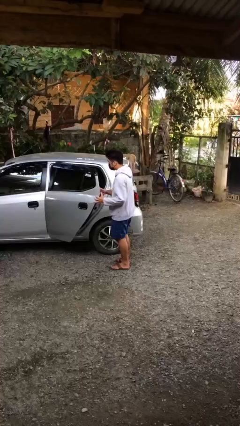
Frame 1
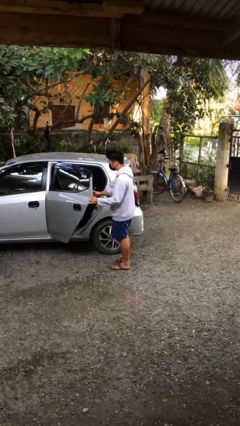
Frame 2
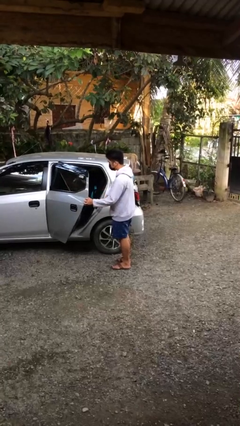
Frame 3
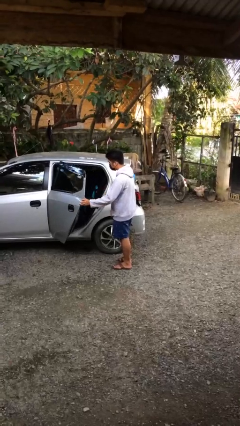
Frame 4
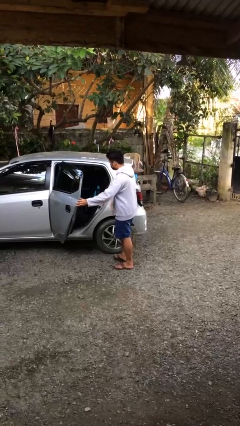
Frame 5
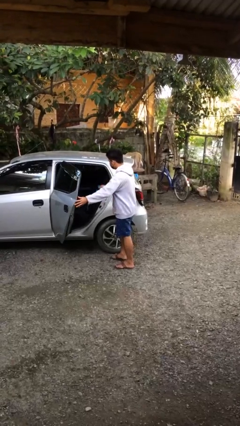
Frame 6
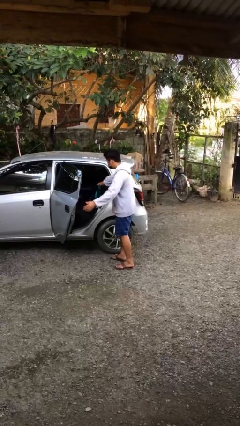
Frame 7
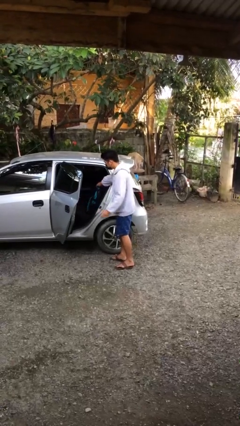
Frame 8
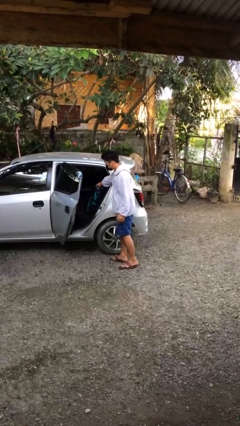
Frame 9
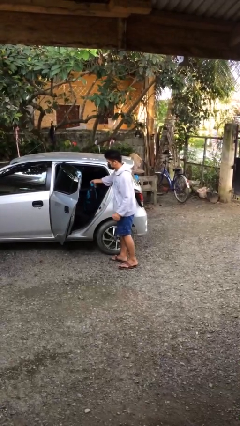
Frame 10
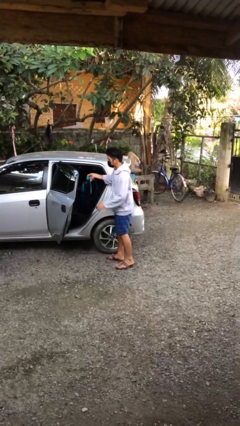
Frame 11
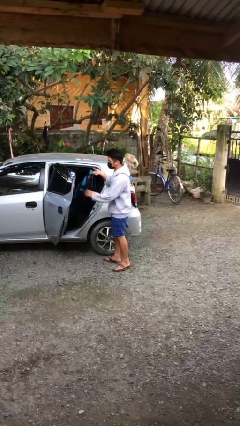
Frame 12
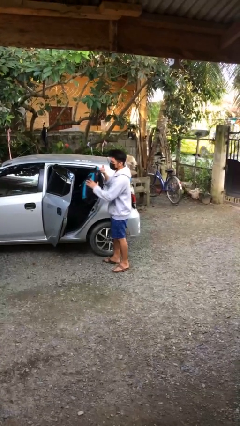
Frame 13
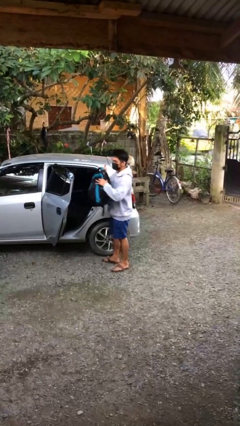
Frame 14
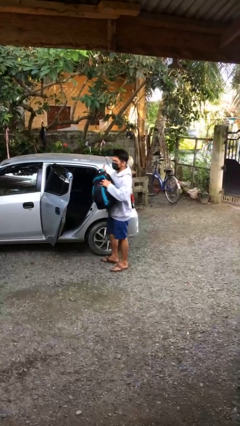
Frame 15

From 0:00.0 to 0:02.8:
person unloads car

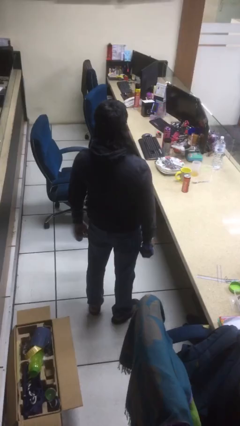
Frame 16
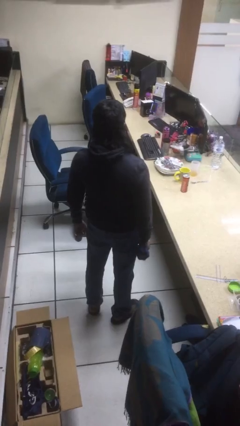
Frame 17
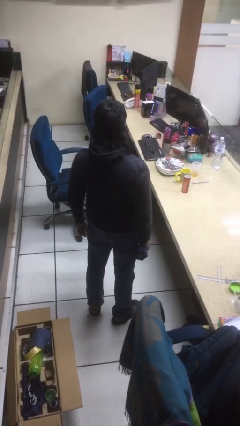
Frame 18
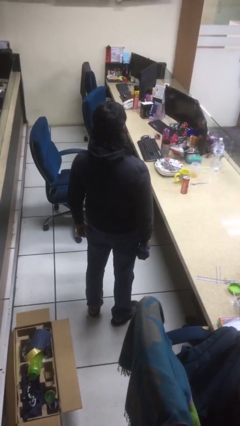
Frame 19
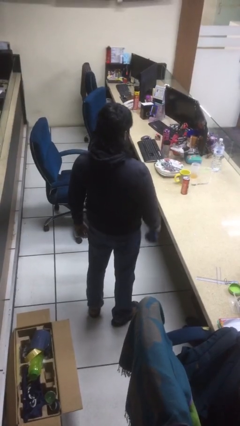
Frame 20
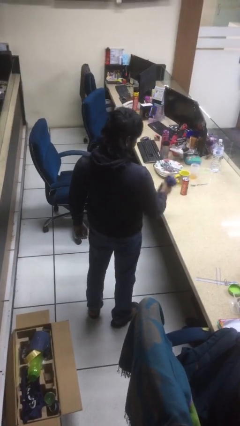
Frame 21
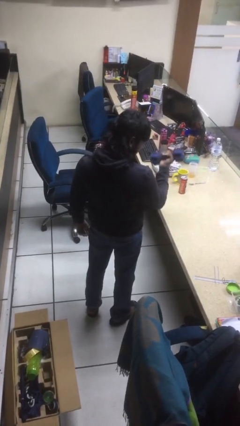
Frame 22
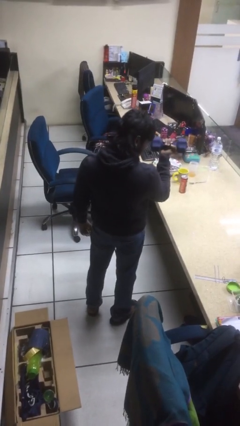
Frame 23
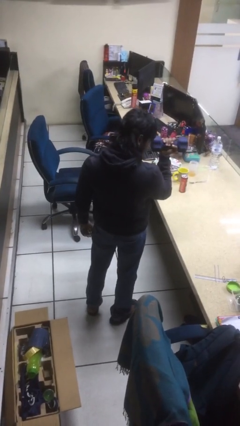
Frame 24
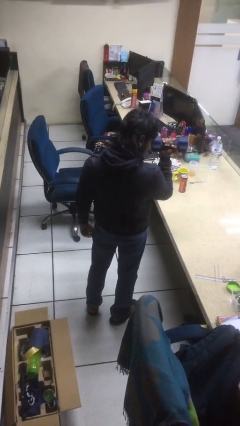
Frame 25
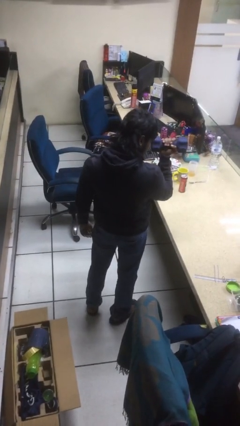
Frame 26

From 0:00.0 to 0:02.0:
person lifts dumbbells

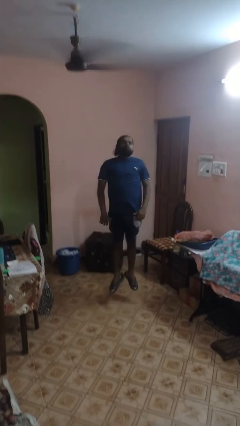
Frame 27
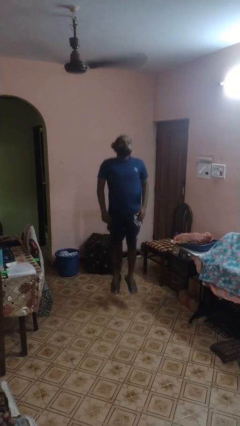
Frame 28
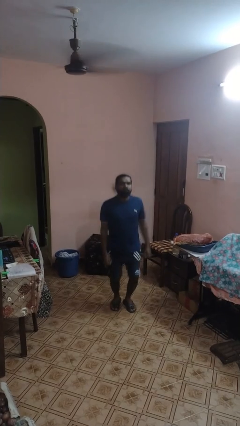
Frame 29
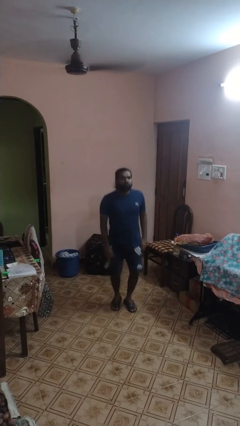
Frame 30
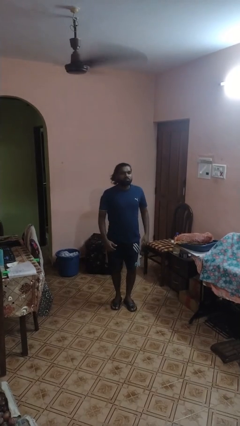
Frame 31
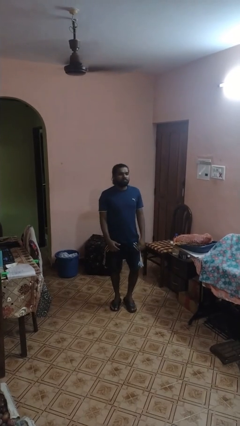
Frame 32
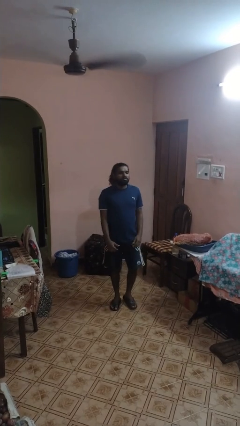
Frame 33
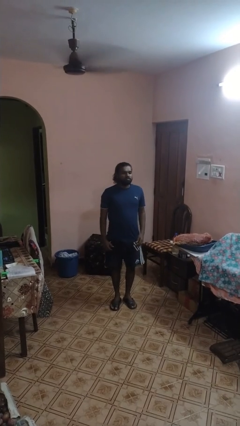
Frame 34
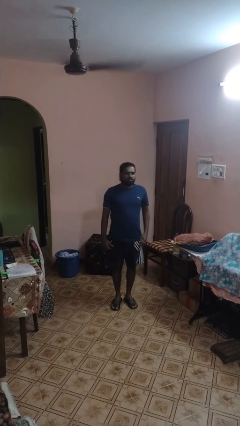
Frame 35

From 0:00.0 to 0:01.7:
person jumps

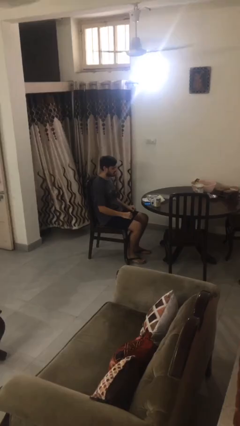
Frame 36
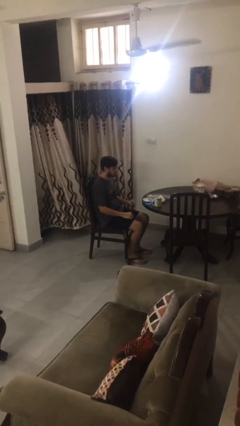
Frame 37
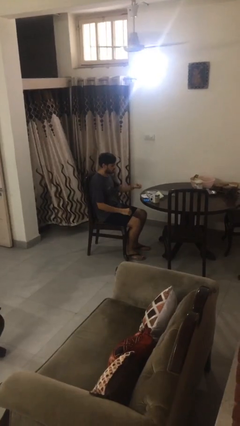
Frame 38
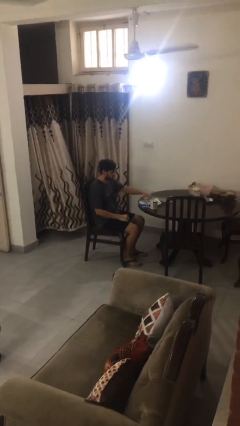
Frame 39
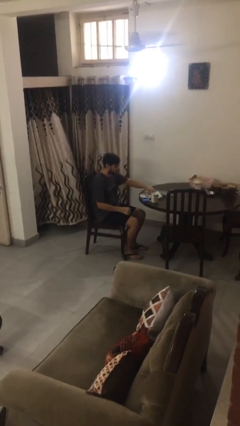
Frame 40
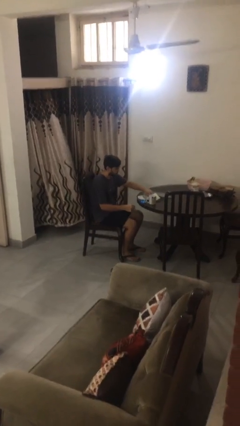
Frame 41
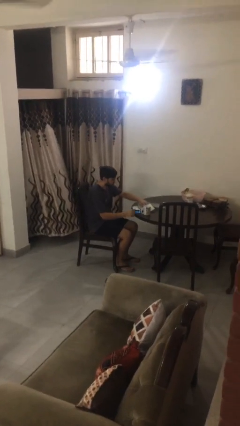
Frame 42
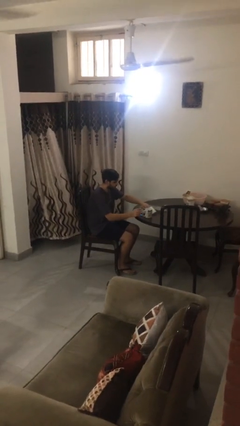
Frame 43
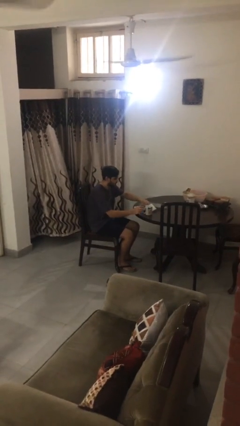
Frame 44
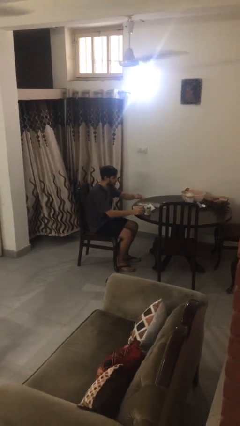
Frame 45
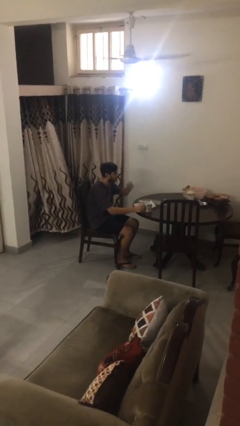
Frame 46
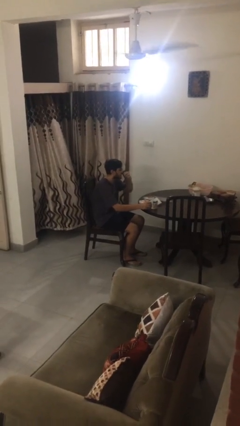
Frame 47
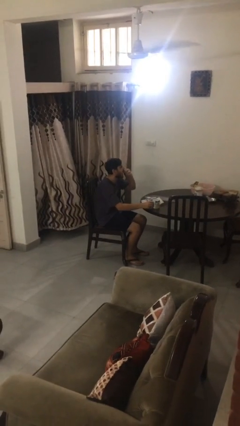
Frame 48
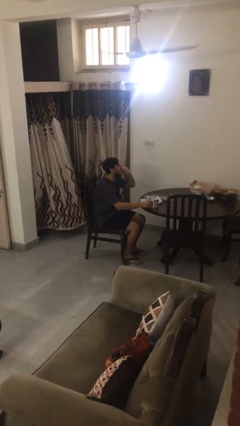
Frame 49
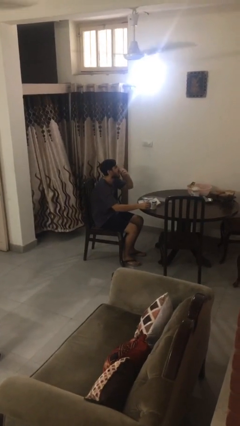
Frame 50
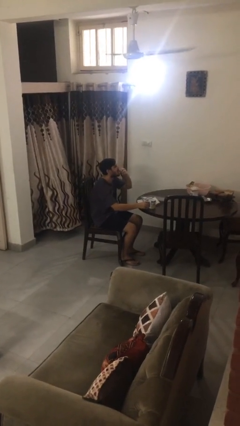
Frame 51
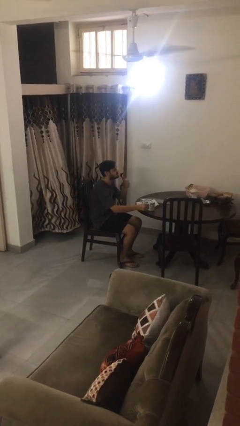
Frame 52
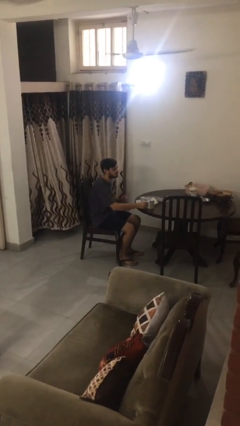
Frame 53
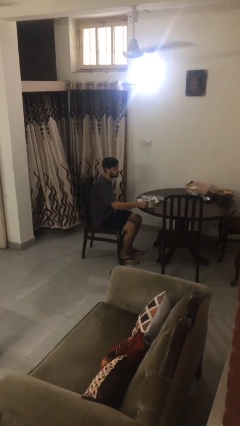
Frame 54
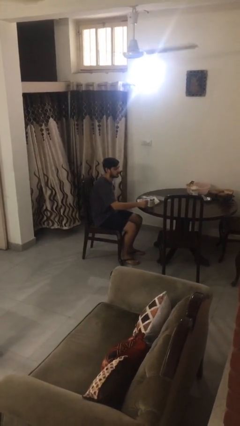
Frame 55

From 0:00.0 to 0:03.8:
person takes medicine pills

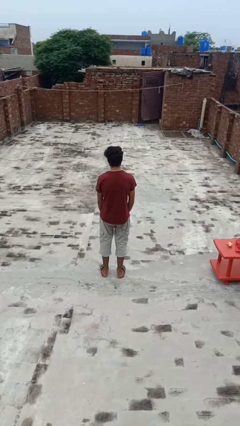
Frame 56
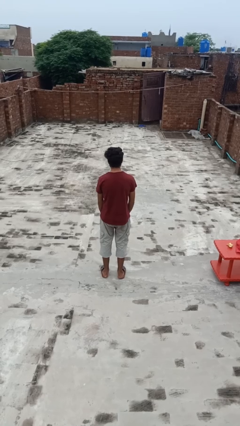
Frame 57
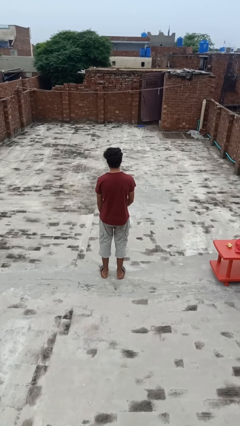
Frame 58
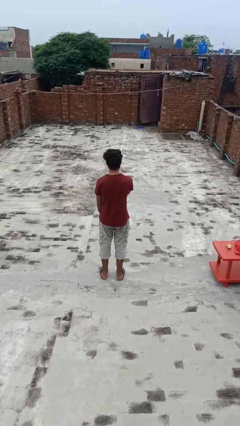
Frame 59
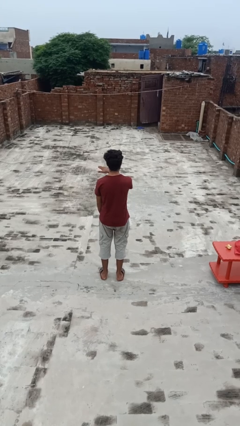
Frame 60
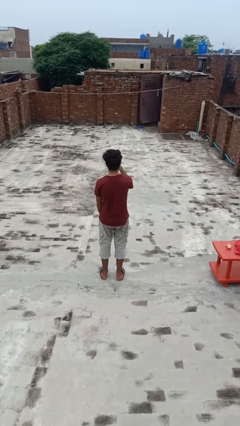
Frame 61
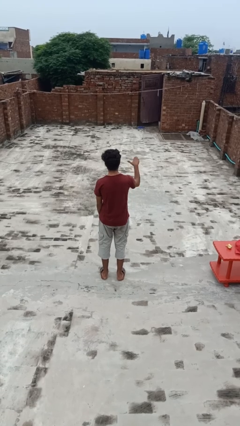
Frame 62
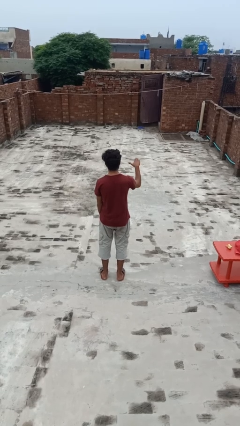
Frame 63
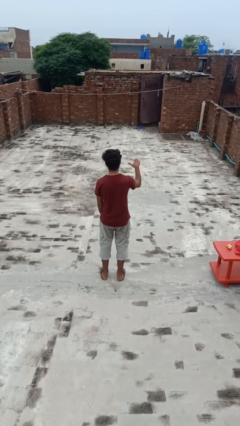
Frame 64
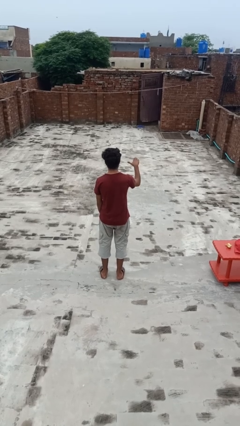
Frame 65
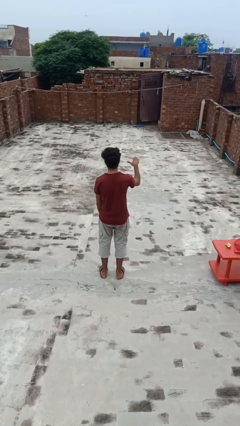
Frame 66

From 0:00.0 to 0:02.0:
person gestures cut

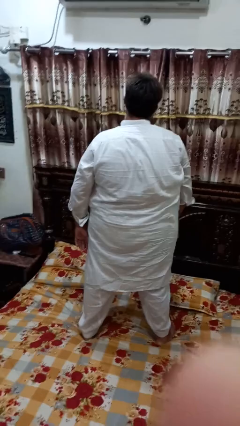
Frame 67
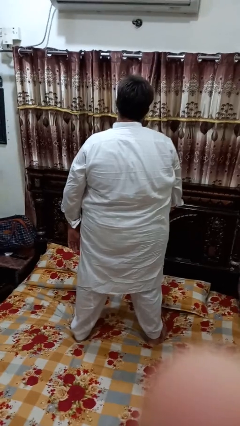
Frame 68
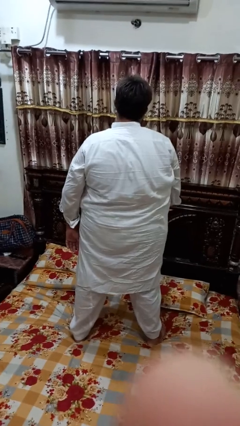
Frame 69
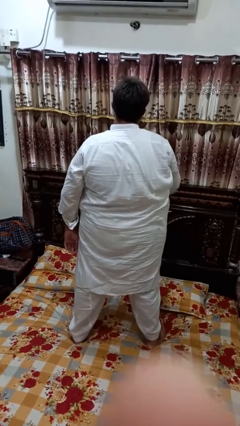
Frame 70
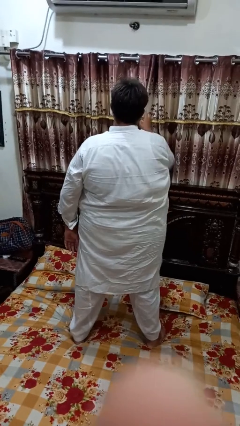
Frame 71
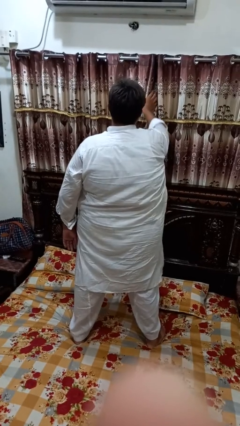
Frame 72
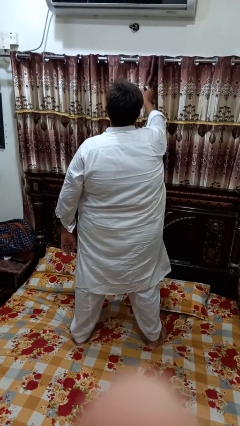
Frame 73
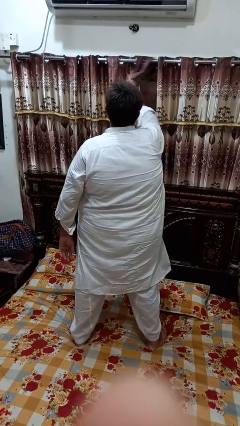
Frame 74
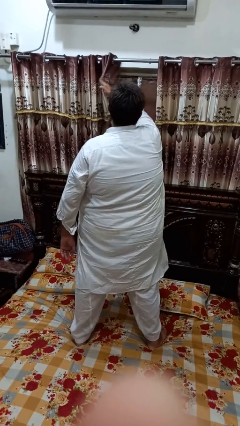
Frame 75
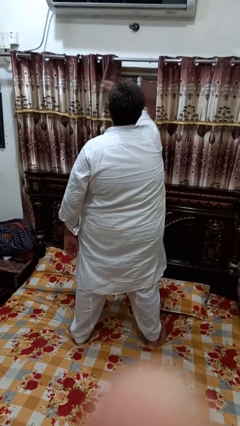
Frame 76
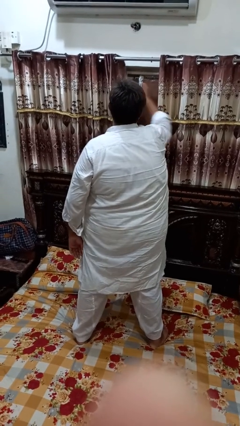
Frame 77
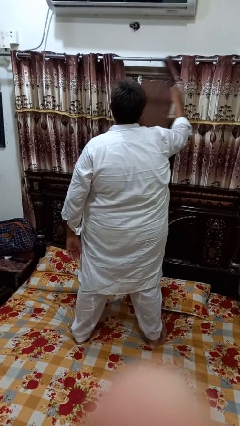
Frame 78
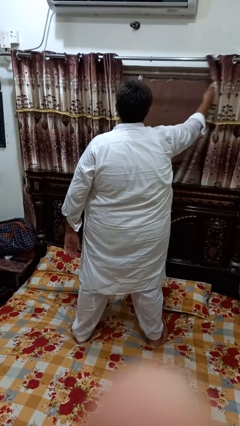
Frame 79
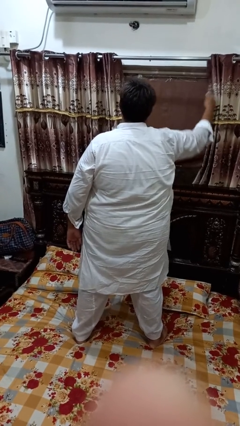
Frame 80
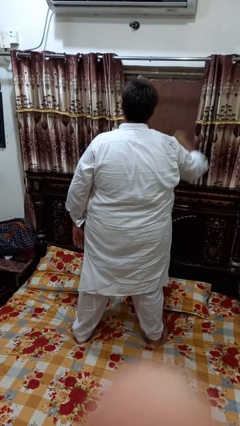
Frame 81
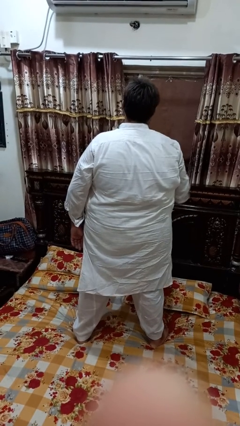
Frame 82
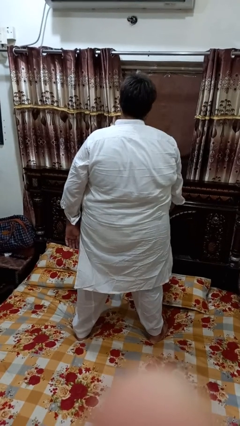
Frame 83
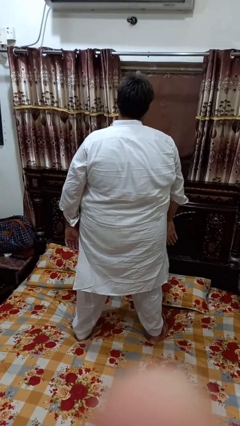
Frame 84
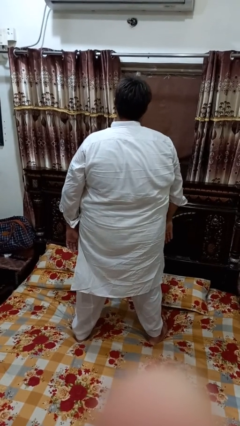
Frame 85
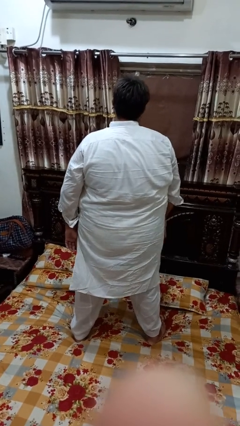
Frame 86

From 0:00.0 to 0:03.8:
person opens curtains

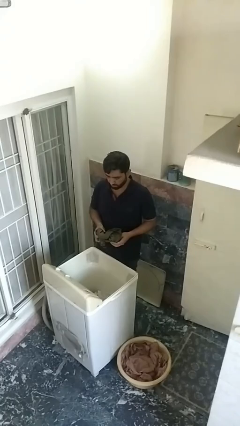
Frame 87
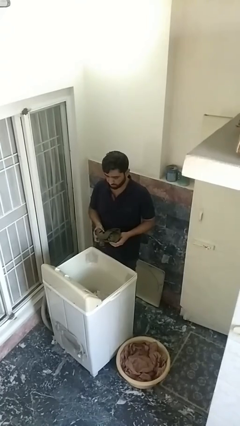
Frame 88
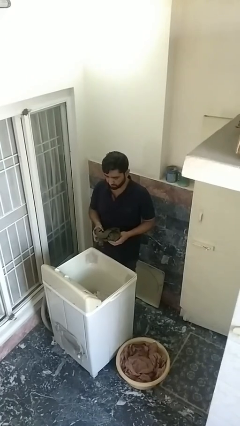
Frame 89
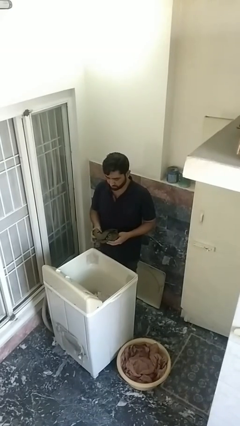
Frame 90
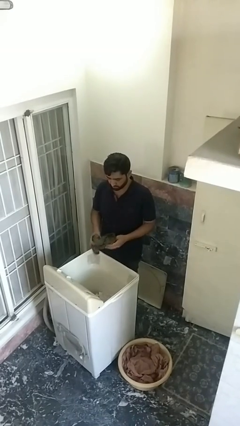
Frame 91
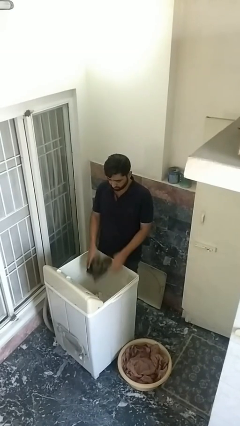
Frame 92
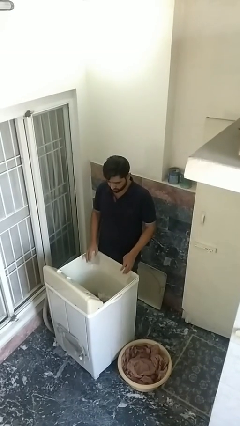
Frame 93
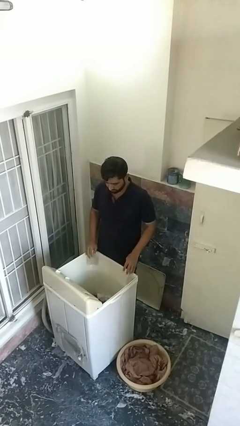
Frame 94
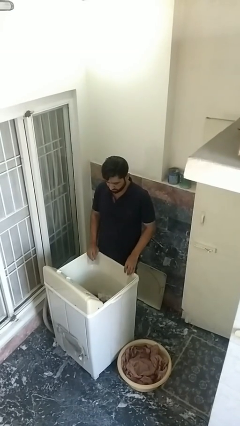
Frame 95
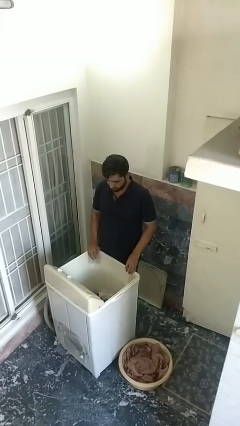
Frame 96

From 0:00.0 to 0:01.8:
person loads clotheswasher
